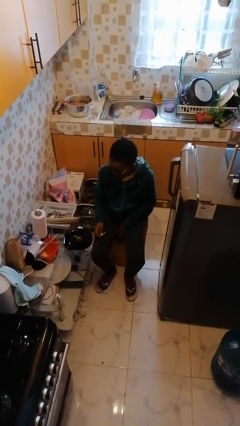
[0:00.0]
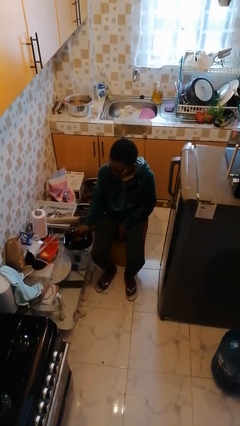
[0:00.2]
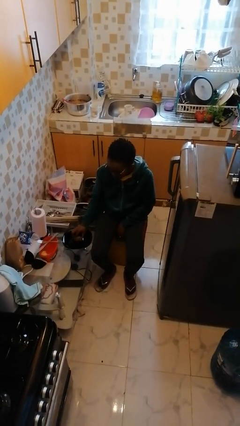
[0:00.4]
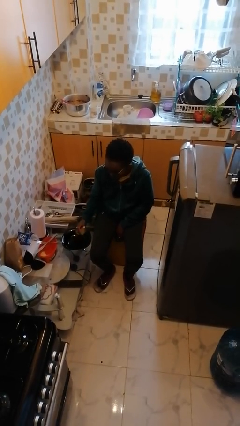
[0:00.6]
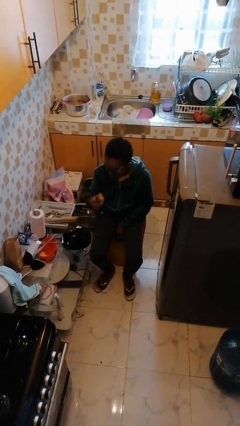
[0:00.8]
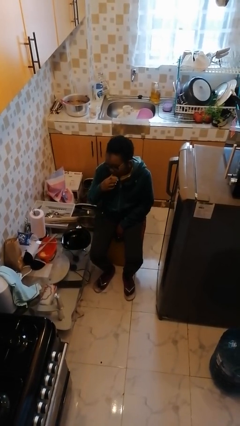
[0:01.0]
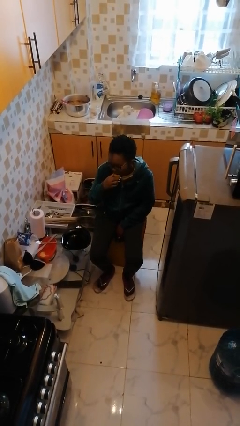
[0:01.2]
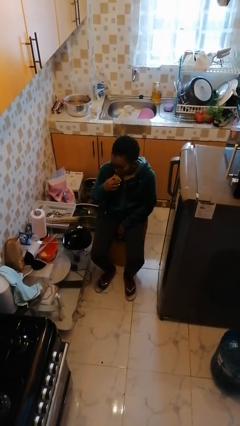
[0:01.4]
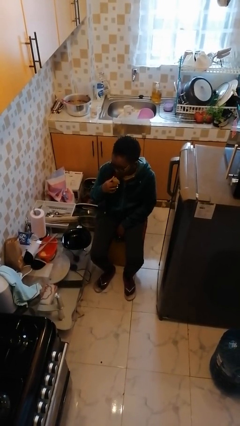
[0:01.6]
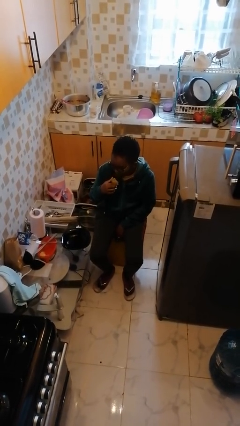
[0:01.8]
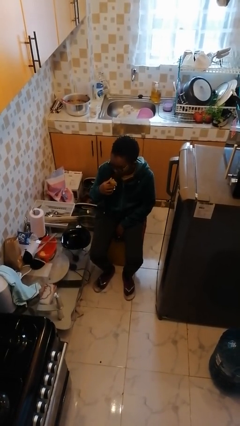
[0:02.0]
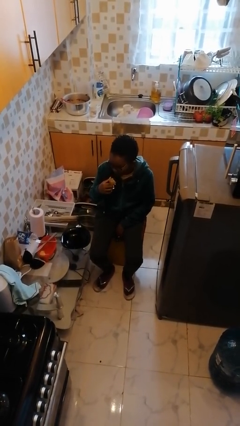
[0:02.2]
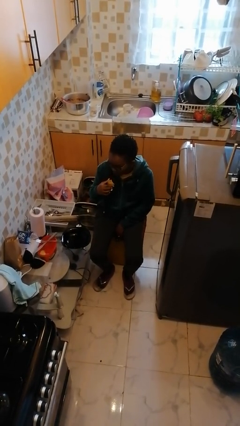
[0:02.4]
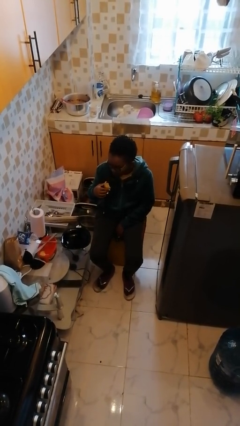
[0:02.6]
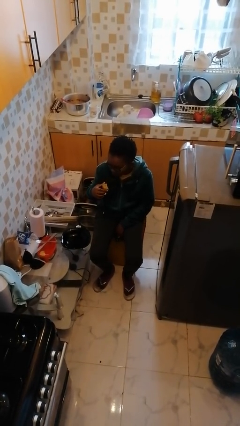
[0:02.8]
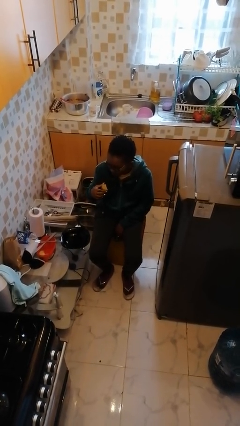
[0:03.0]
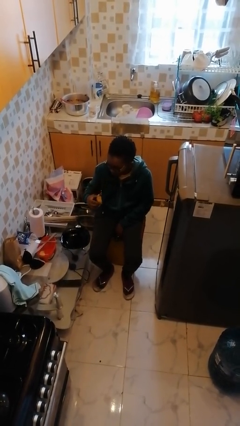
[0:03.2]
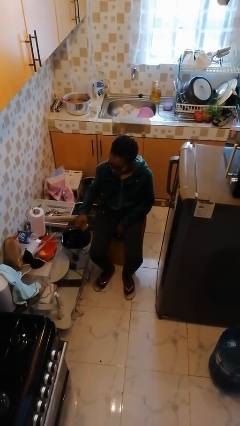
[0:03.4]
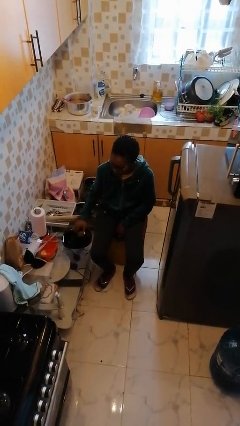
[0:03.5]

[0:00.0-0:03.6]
person eats with hands

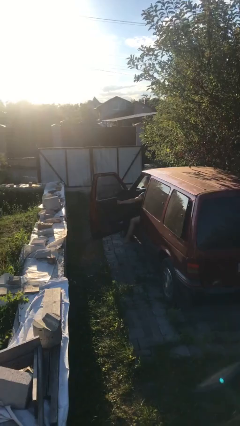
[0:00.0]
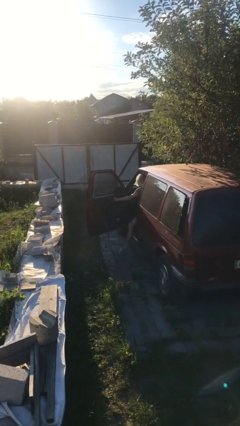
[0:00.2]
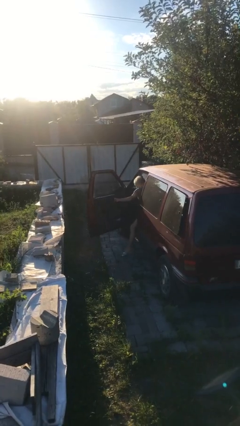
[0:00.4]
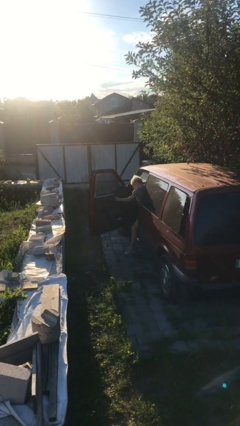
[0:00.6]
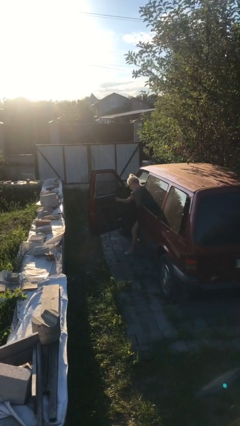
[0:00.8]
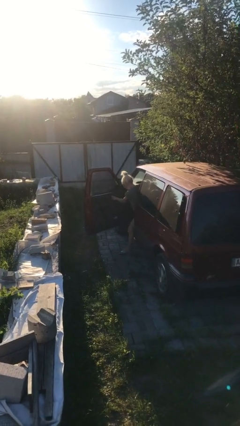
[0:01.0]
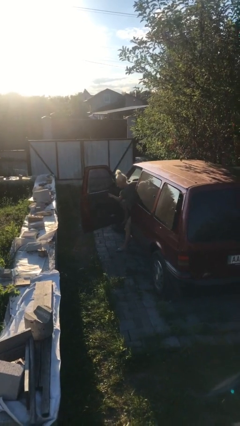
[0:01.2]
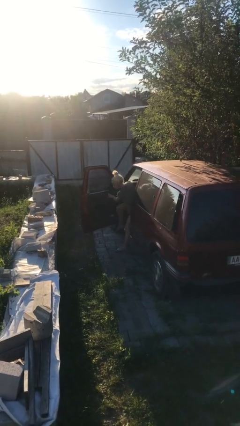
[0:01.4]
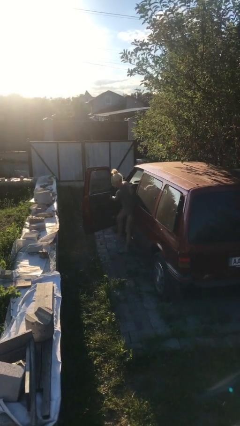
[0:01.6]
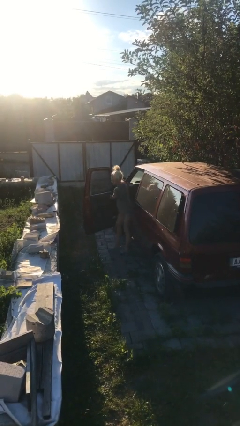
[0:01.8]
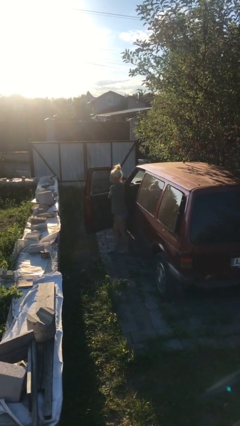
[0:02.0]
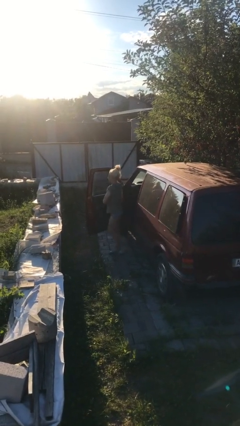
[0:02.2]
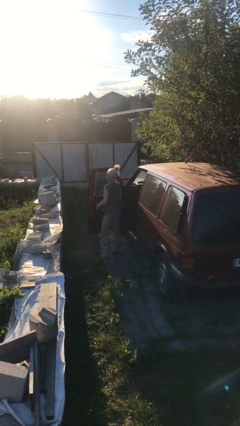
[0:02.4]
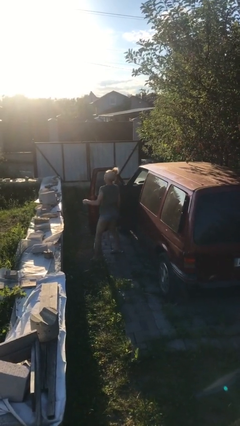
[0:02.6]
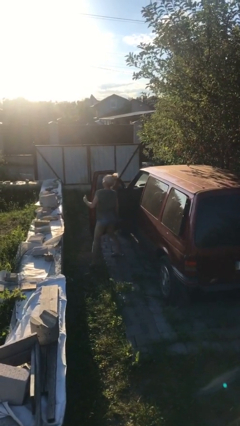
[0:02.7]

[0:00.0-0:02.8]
person exits car

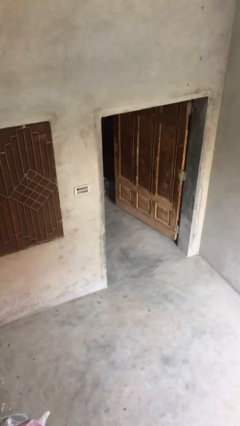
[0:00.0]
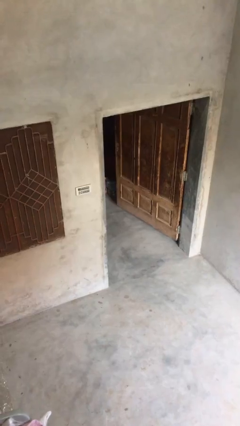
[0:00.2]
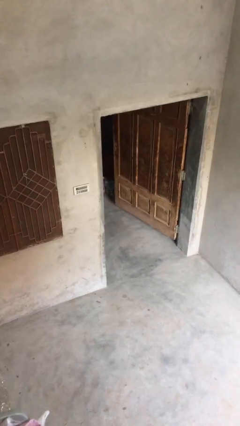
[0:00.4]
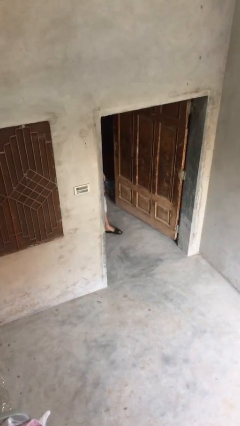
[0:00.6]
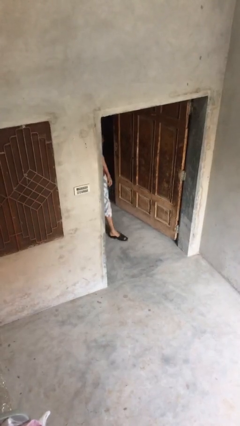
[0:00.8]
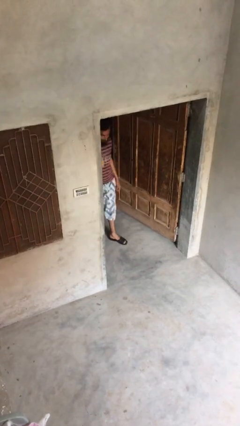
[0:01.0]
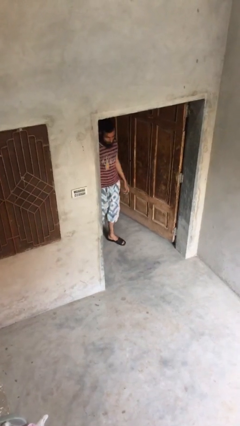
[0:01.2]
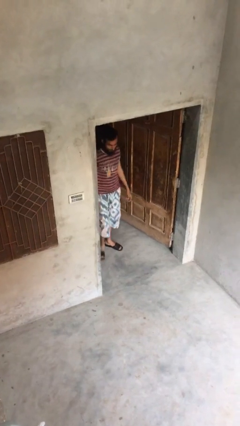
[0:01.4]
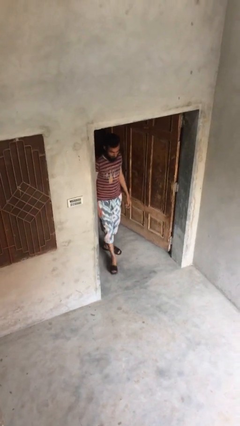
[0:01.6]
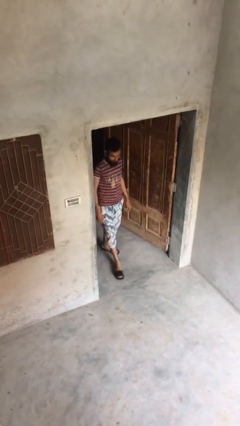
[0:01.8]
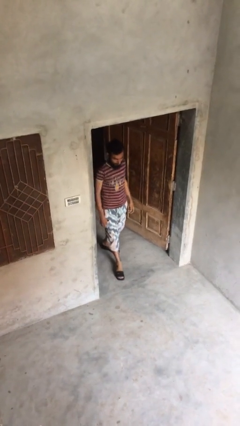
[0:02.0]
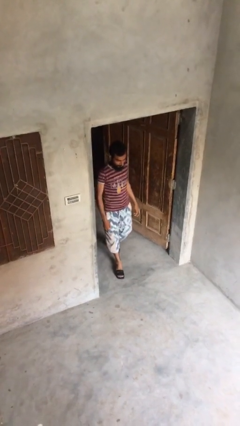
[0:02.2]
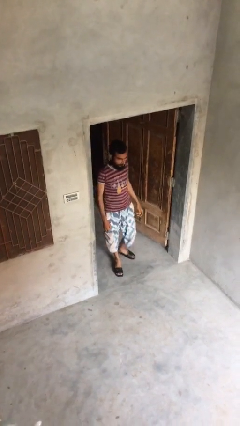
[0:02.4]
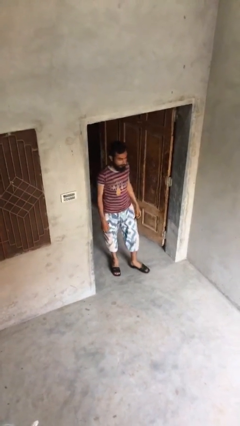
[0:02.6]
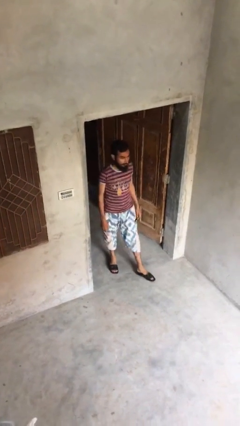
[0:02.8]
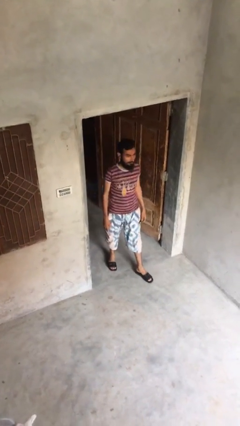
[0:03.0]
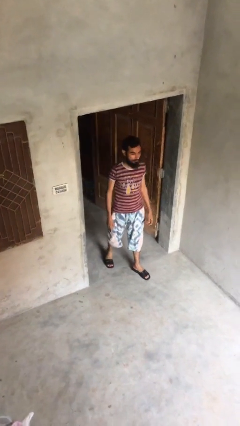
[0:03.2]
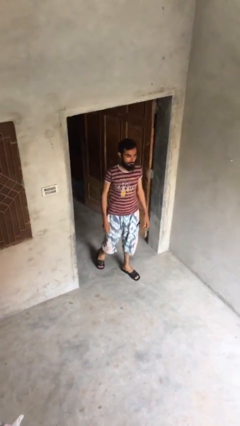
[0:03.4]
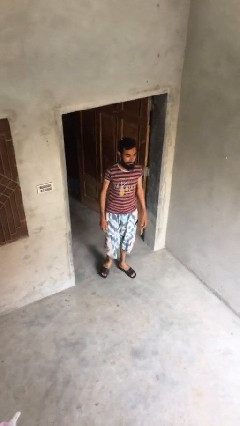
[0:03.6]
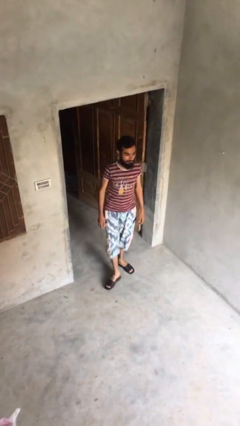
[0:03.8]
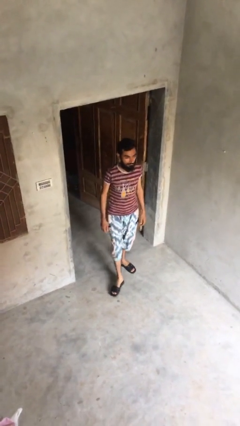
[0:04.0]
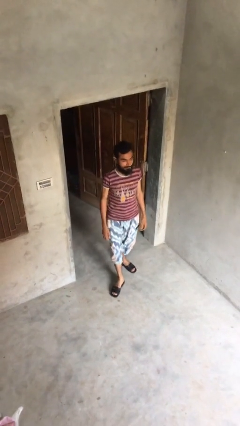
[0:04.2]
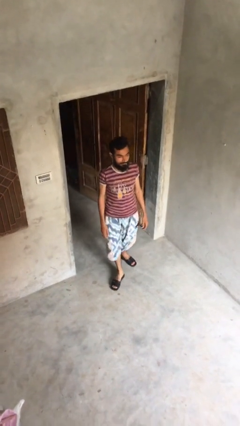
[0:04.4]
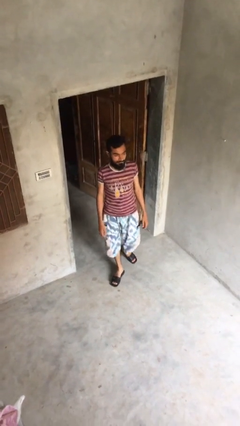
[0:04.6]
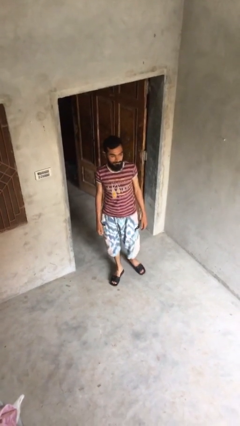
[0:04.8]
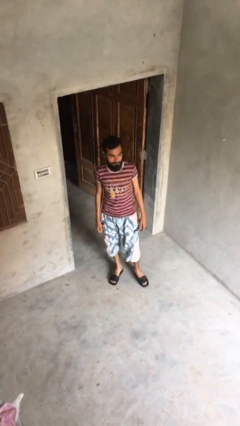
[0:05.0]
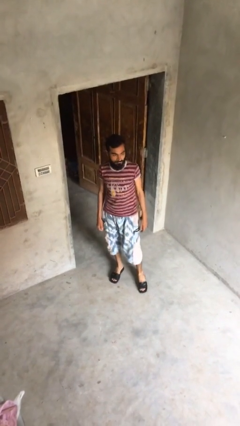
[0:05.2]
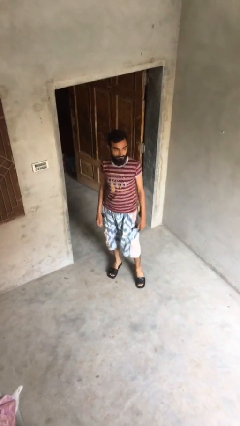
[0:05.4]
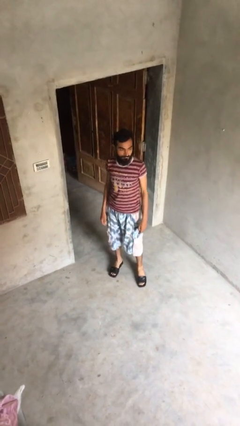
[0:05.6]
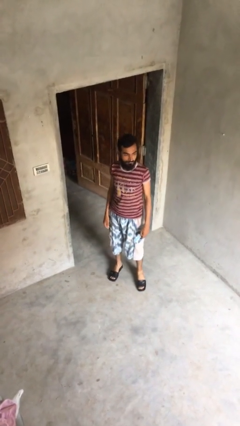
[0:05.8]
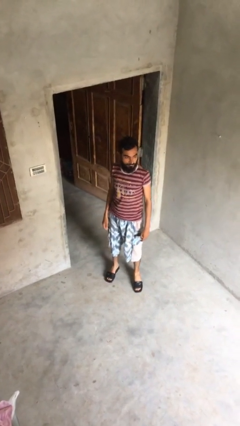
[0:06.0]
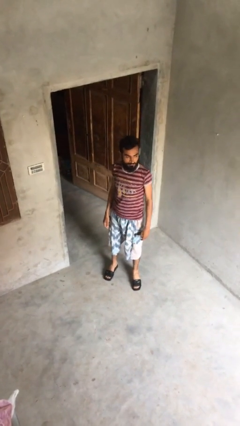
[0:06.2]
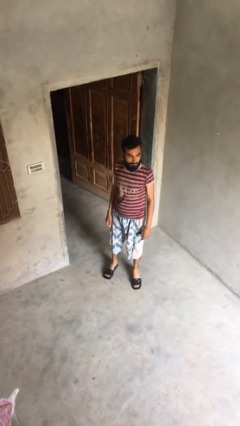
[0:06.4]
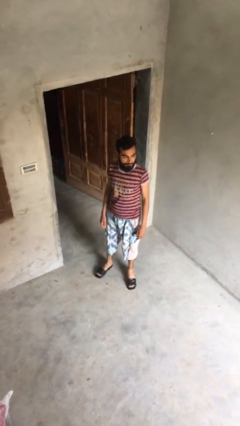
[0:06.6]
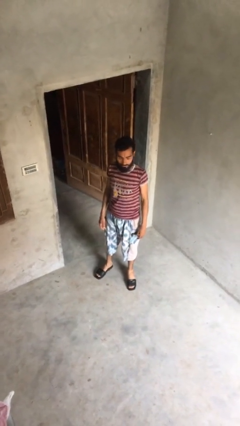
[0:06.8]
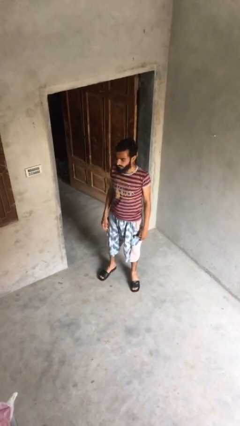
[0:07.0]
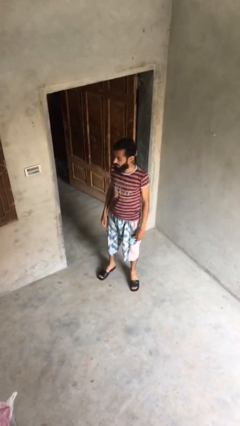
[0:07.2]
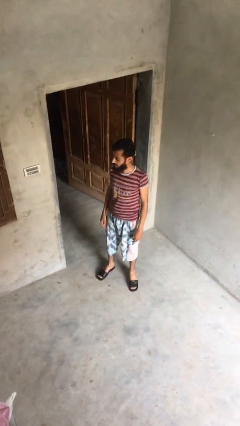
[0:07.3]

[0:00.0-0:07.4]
person enters scene through structure

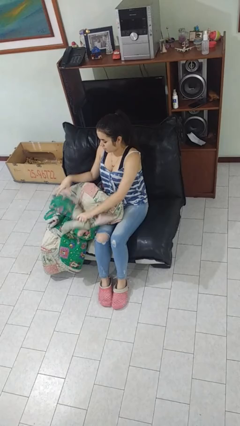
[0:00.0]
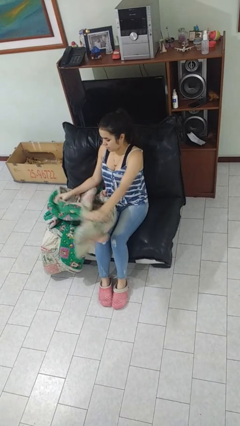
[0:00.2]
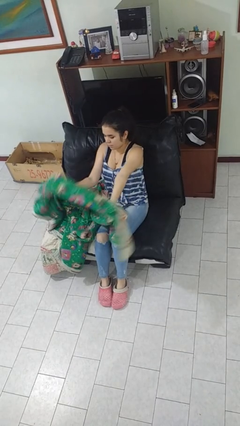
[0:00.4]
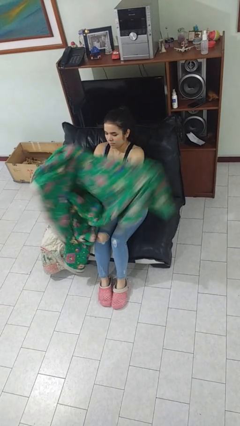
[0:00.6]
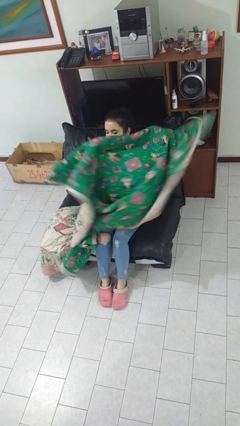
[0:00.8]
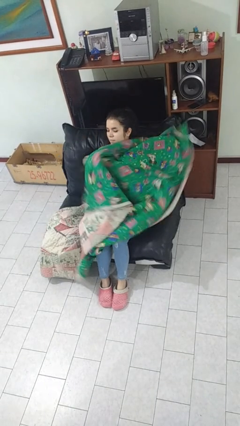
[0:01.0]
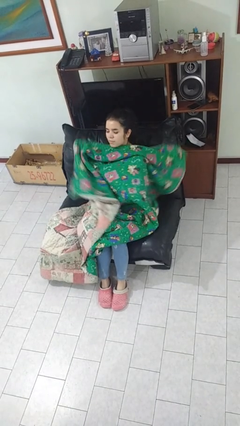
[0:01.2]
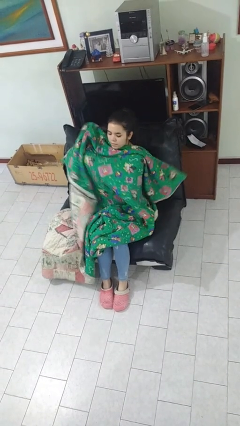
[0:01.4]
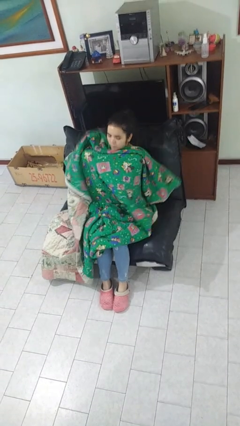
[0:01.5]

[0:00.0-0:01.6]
person covers with blanket

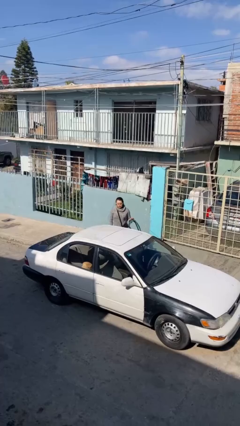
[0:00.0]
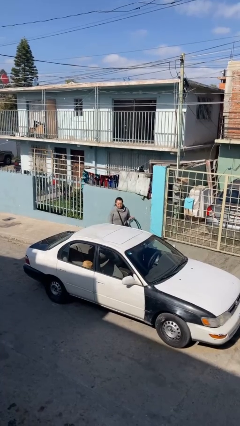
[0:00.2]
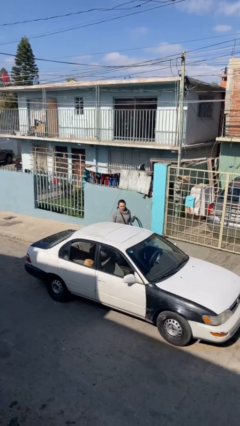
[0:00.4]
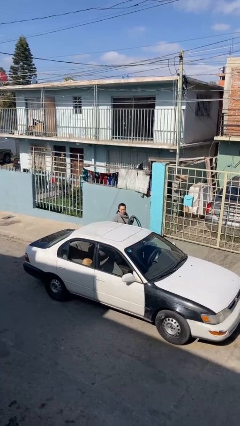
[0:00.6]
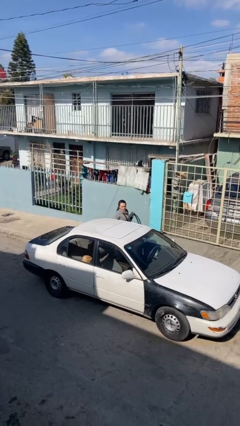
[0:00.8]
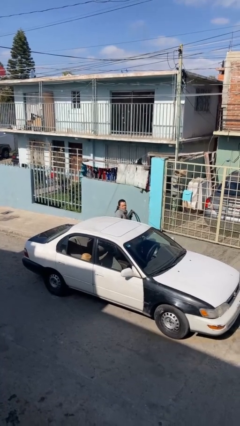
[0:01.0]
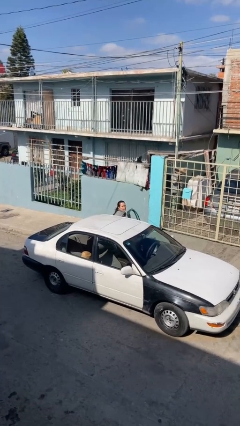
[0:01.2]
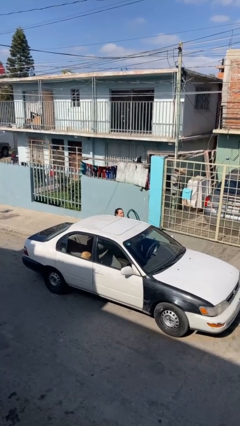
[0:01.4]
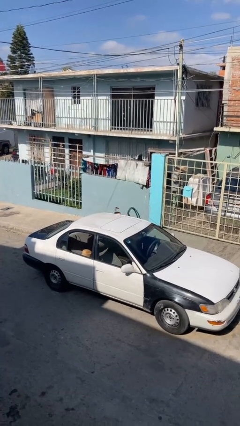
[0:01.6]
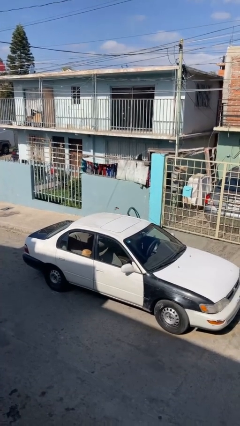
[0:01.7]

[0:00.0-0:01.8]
person enters car

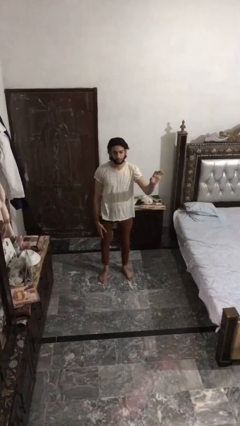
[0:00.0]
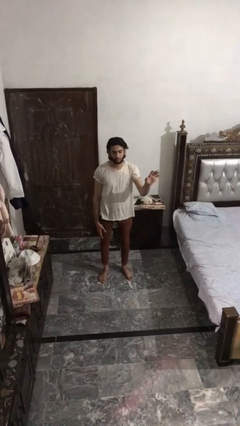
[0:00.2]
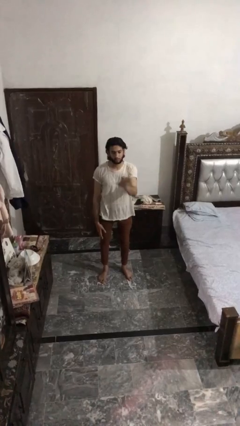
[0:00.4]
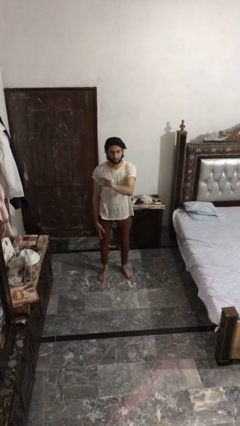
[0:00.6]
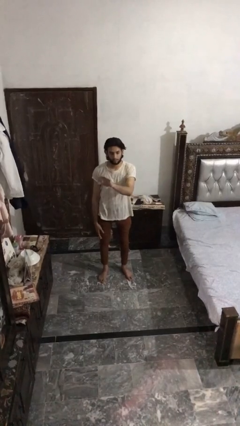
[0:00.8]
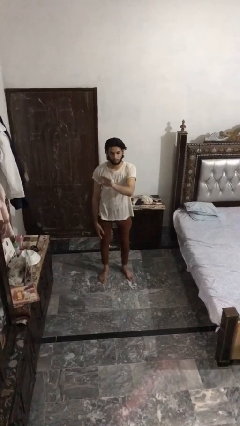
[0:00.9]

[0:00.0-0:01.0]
person gestures swipe right
